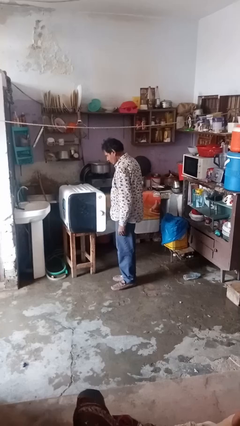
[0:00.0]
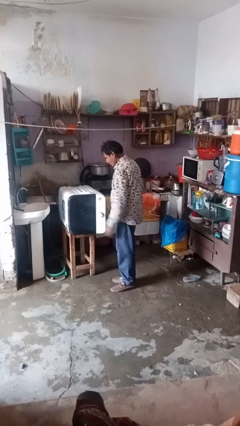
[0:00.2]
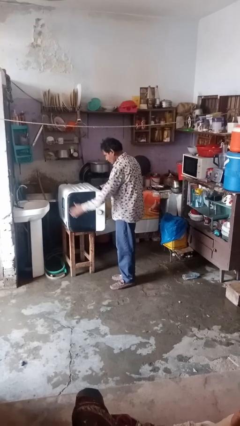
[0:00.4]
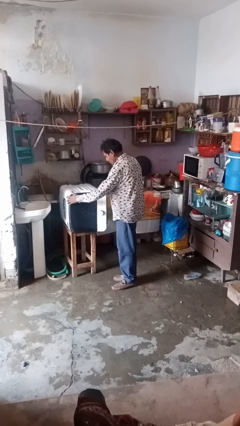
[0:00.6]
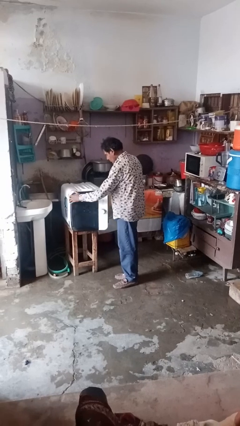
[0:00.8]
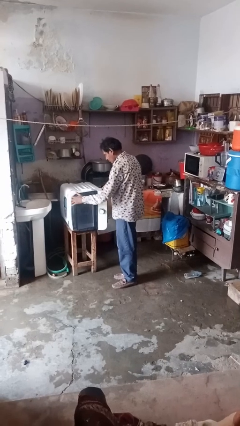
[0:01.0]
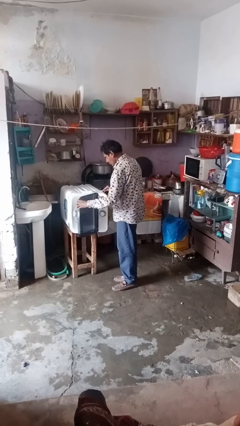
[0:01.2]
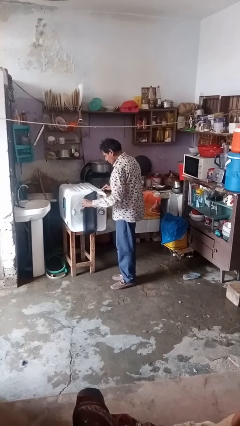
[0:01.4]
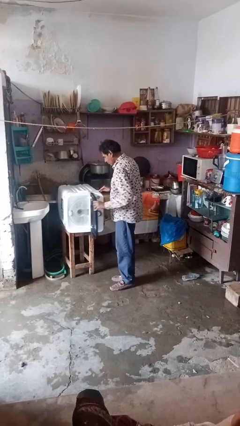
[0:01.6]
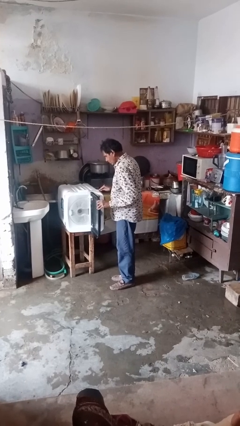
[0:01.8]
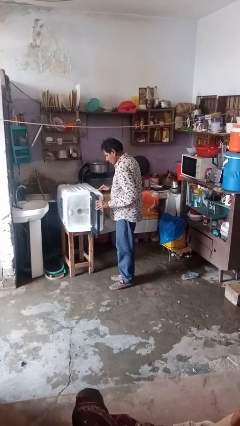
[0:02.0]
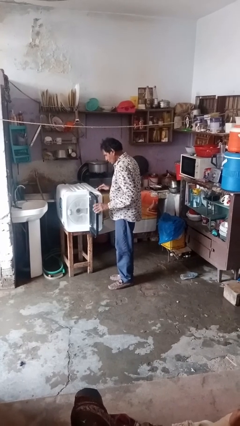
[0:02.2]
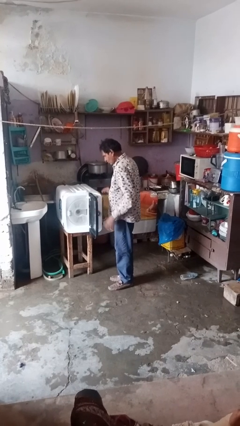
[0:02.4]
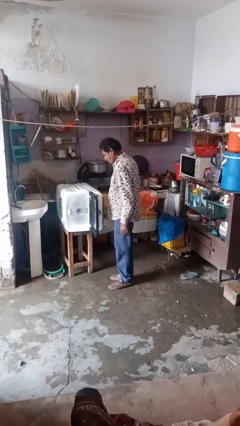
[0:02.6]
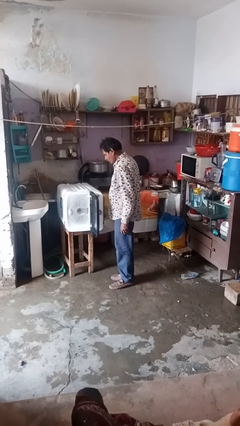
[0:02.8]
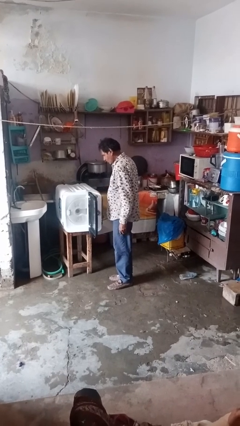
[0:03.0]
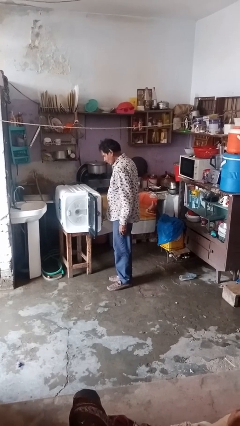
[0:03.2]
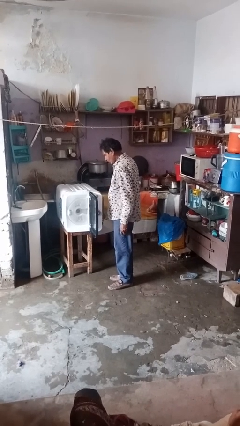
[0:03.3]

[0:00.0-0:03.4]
person opens dishwasher

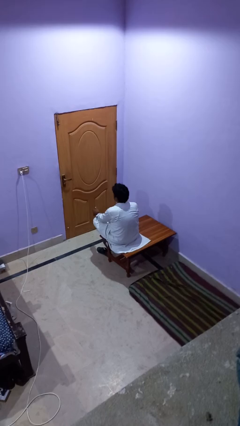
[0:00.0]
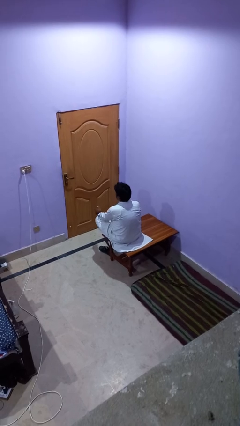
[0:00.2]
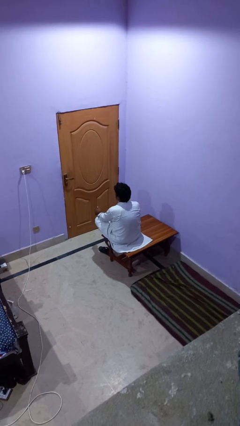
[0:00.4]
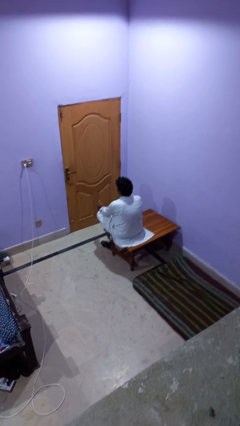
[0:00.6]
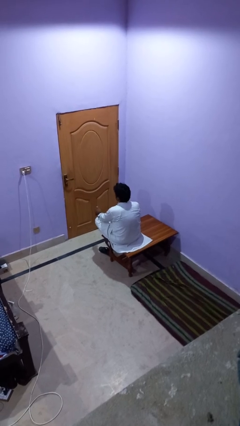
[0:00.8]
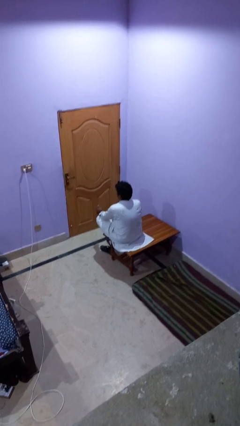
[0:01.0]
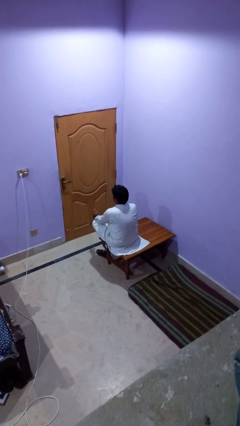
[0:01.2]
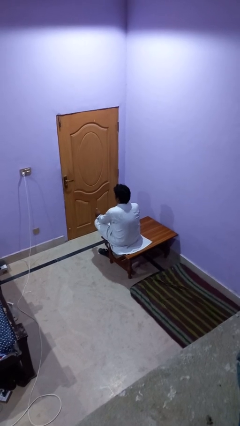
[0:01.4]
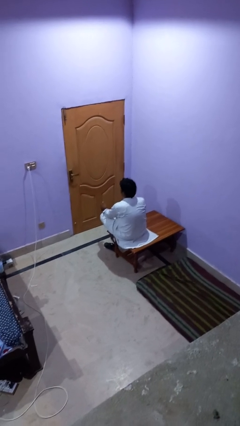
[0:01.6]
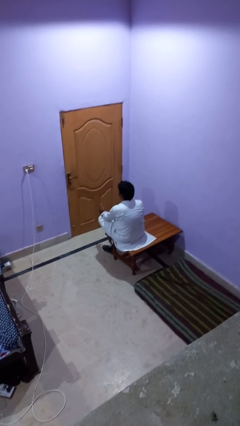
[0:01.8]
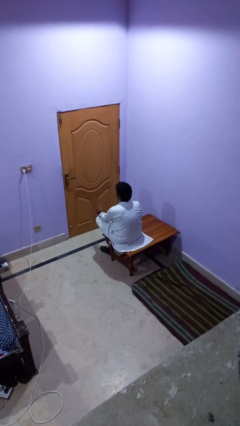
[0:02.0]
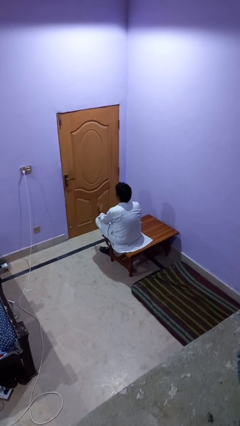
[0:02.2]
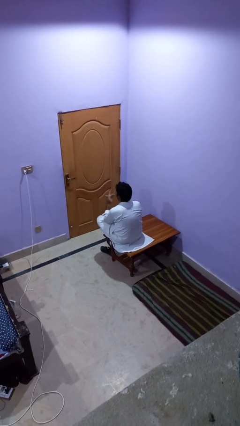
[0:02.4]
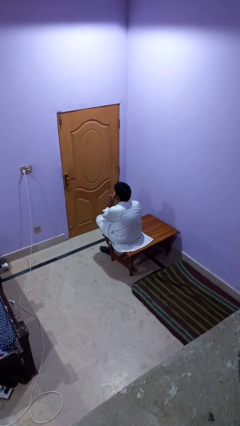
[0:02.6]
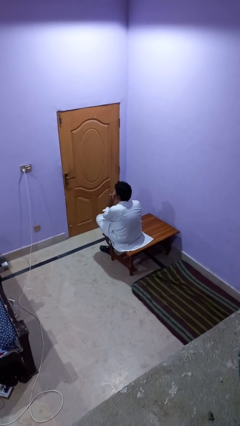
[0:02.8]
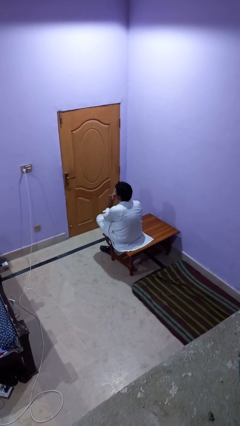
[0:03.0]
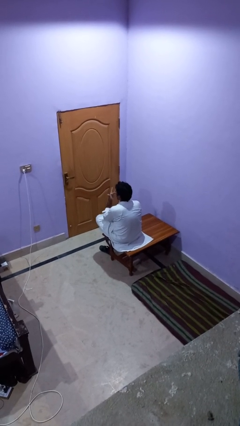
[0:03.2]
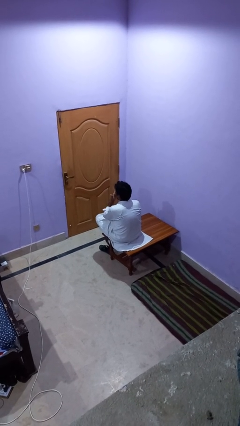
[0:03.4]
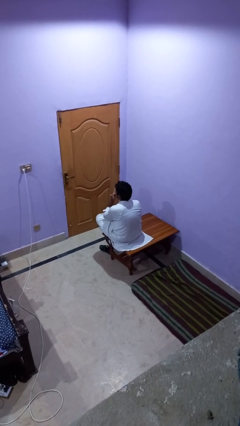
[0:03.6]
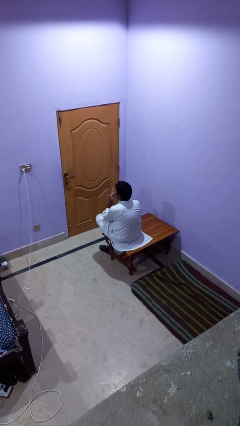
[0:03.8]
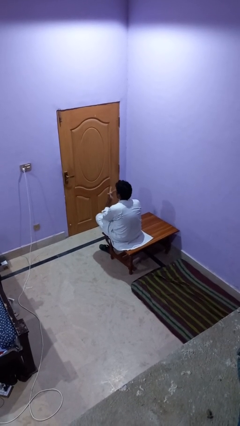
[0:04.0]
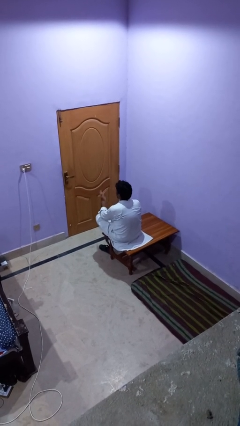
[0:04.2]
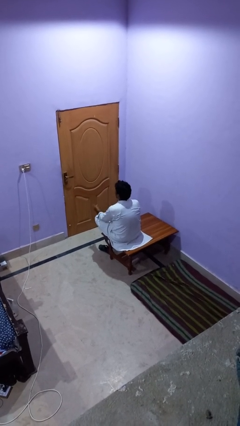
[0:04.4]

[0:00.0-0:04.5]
person licks fingers

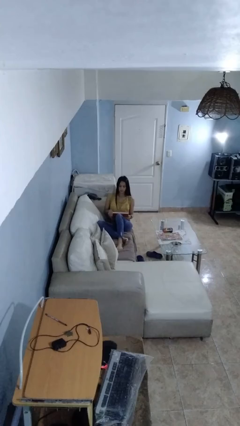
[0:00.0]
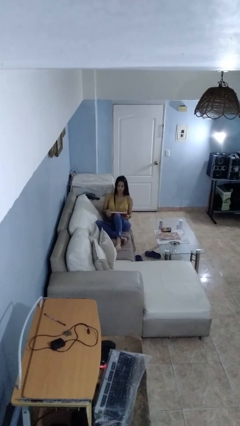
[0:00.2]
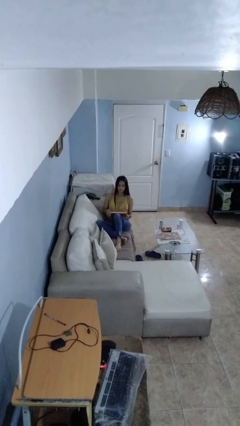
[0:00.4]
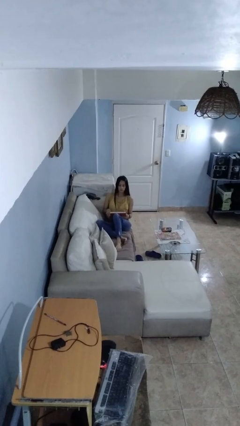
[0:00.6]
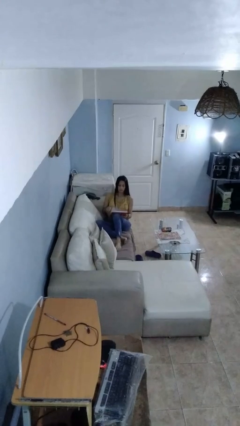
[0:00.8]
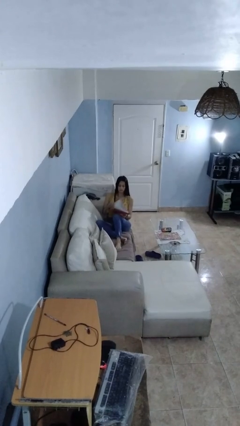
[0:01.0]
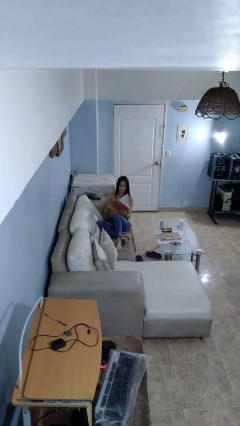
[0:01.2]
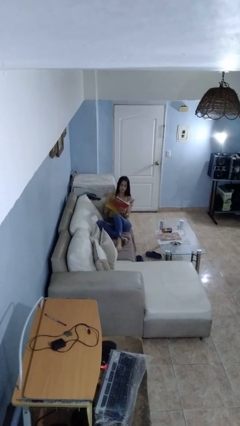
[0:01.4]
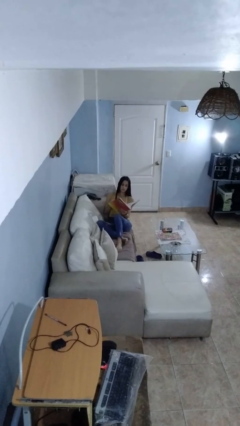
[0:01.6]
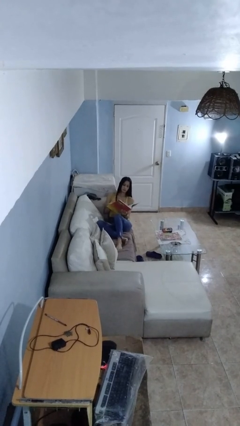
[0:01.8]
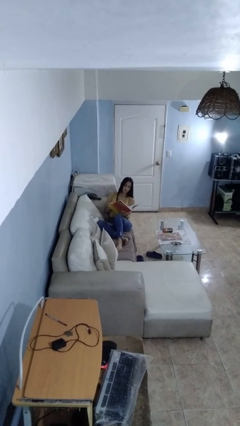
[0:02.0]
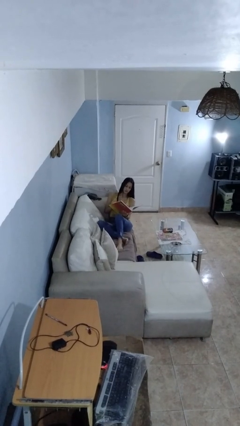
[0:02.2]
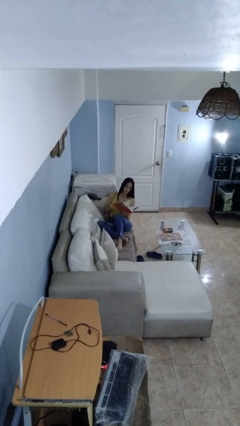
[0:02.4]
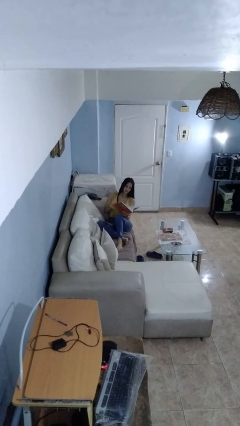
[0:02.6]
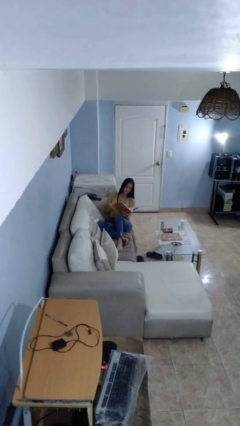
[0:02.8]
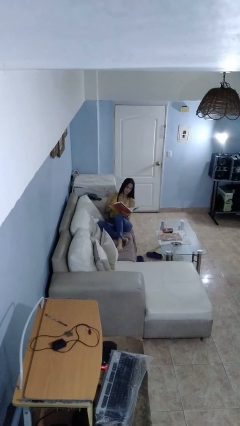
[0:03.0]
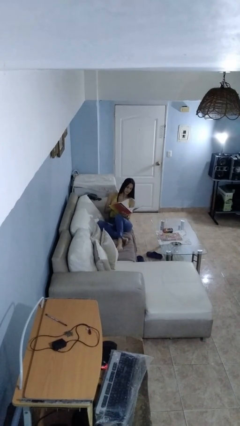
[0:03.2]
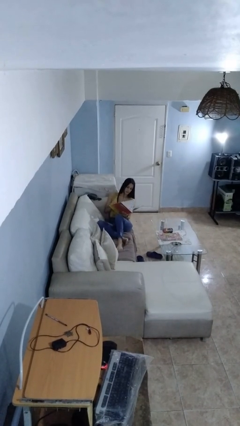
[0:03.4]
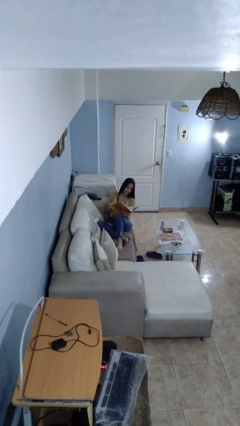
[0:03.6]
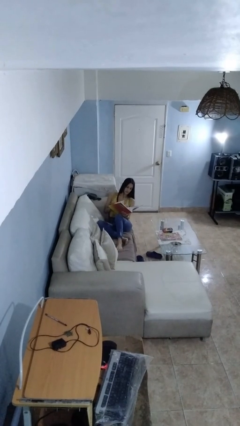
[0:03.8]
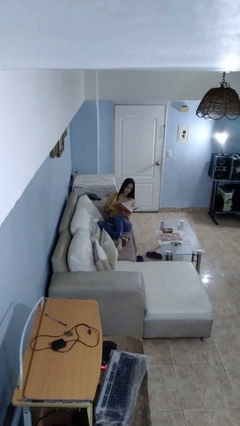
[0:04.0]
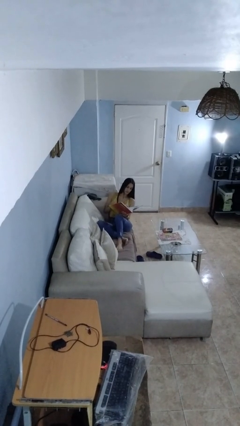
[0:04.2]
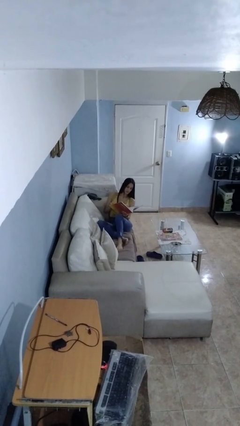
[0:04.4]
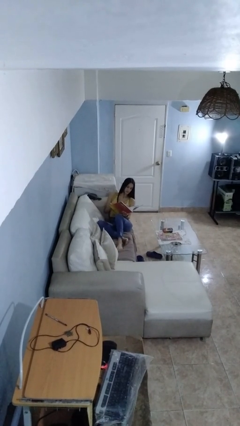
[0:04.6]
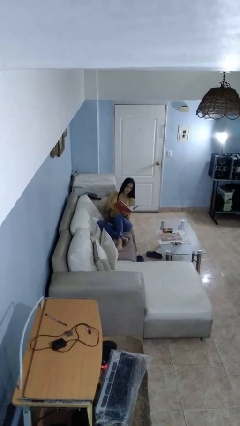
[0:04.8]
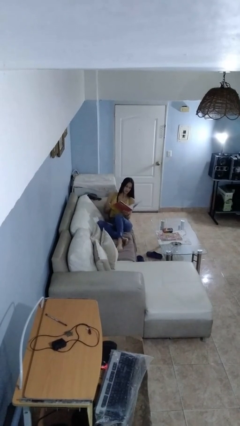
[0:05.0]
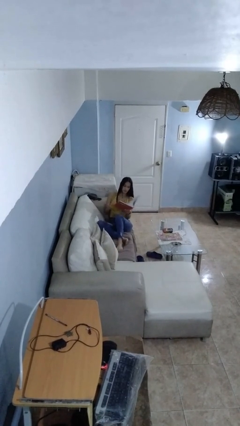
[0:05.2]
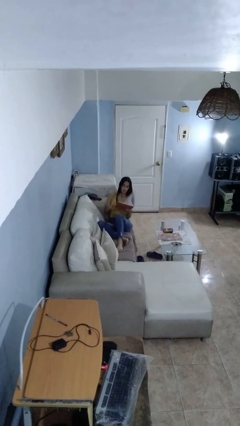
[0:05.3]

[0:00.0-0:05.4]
person reads book

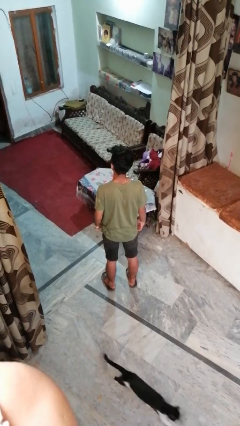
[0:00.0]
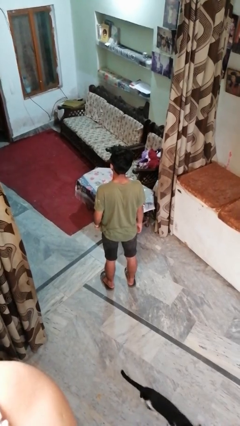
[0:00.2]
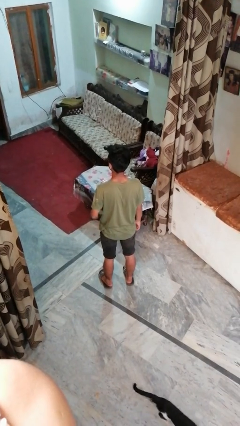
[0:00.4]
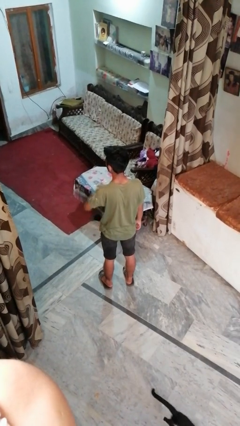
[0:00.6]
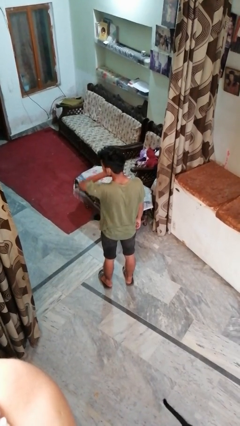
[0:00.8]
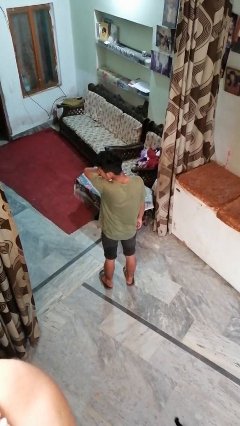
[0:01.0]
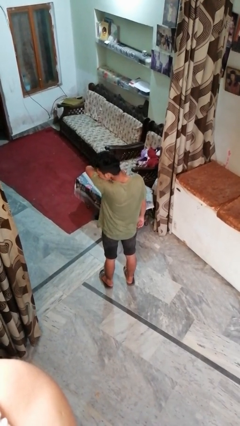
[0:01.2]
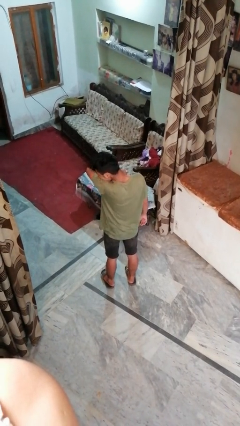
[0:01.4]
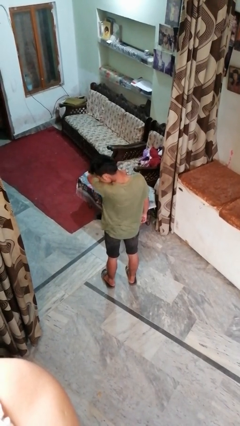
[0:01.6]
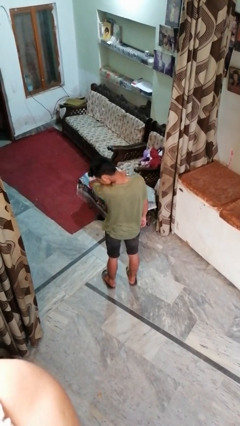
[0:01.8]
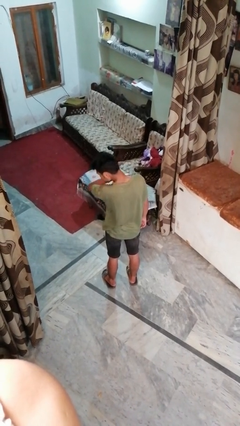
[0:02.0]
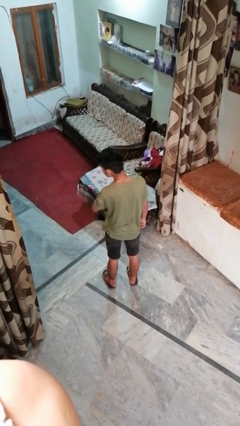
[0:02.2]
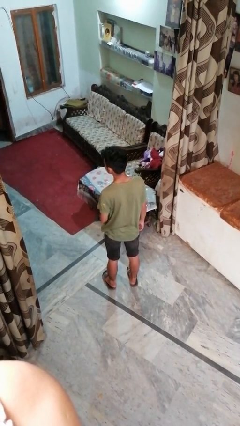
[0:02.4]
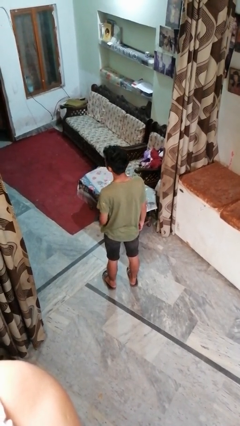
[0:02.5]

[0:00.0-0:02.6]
person sneezes into arm

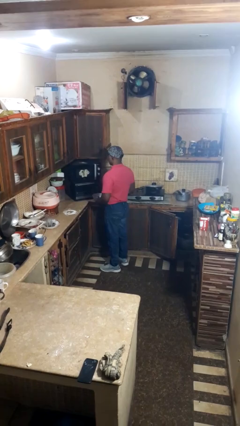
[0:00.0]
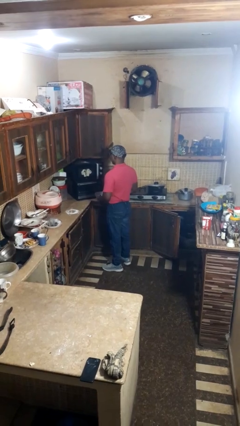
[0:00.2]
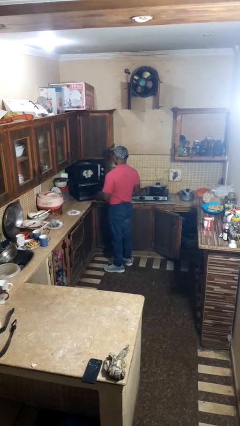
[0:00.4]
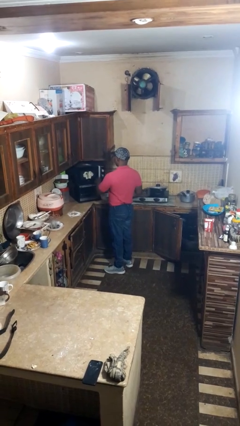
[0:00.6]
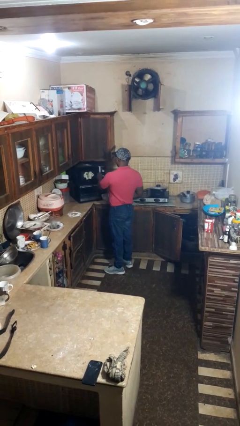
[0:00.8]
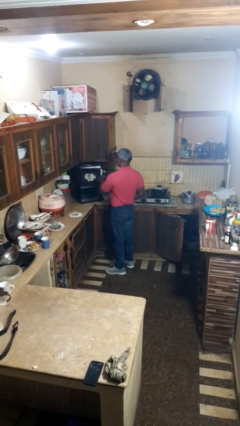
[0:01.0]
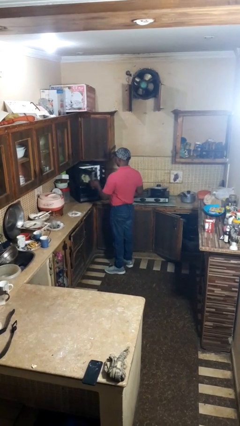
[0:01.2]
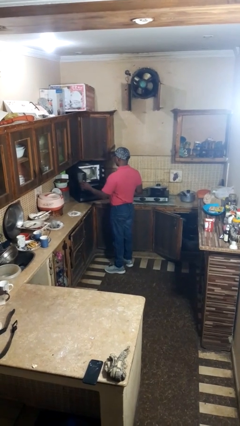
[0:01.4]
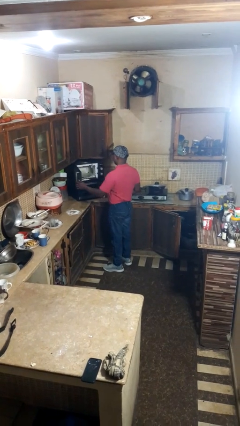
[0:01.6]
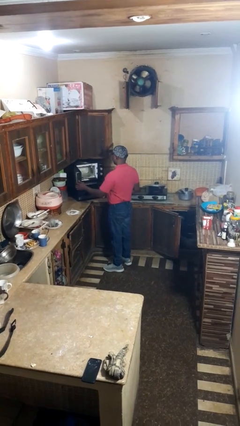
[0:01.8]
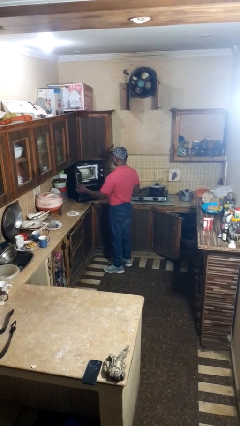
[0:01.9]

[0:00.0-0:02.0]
person opens microwave
